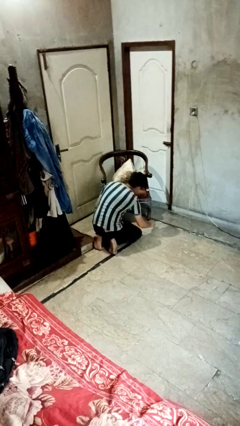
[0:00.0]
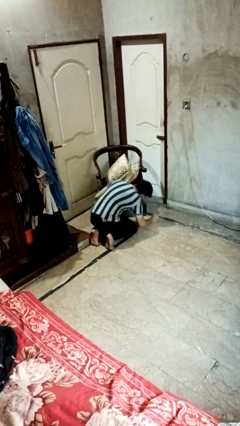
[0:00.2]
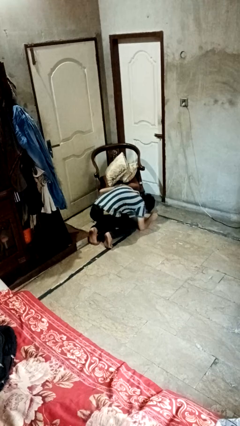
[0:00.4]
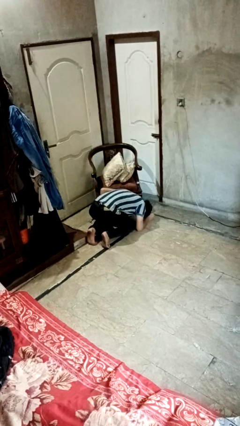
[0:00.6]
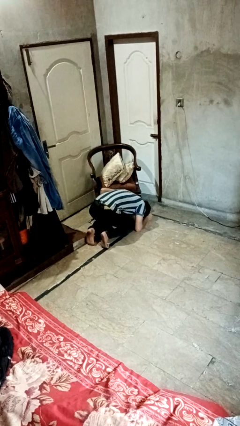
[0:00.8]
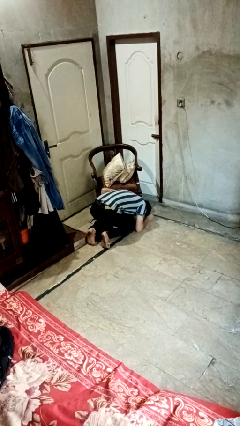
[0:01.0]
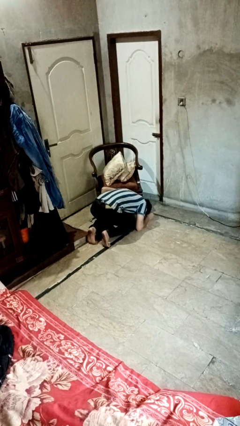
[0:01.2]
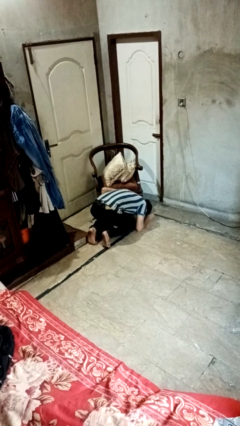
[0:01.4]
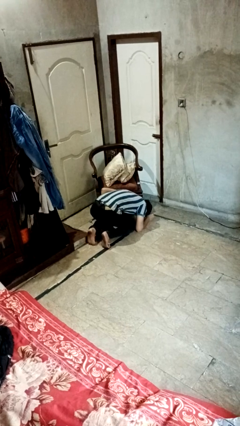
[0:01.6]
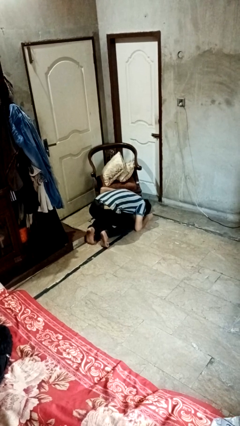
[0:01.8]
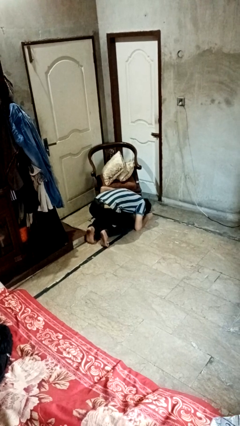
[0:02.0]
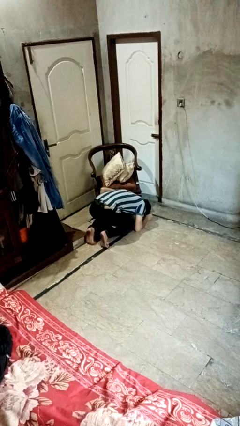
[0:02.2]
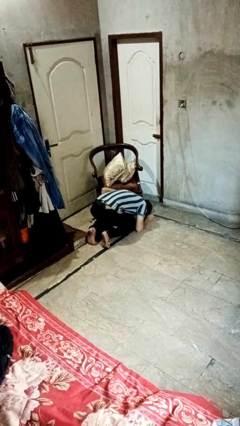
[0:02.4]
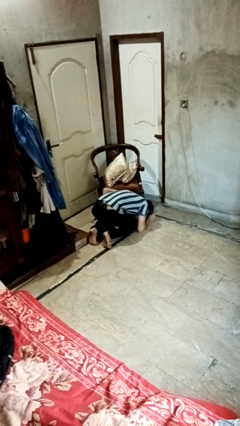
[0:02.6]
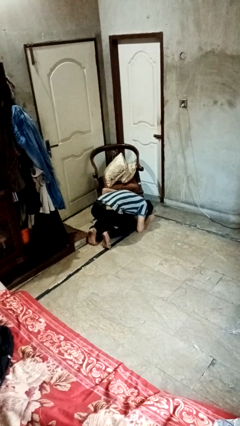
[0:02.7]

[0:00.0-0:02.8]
person searches under couch

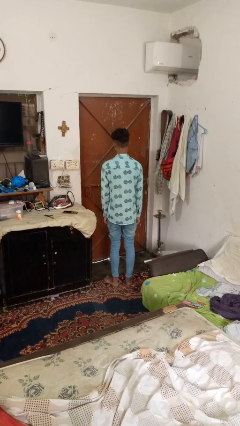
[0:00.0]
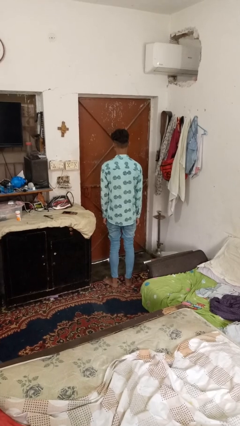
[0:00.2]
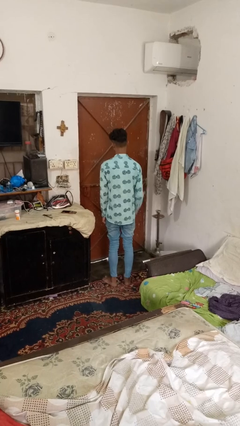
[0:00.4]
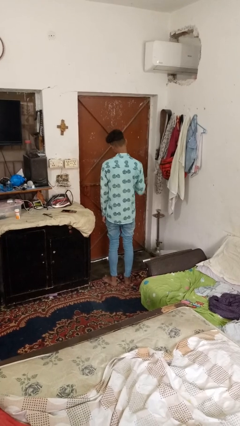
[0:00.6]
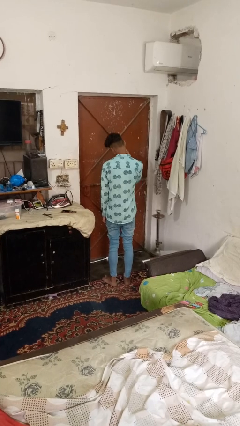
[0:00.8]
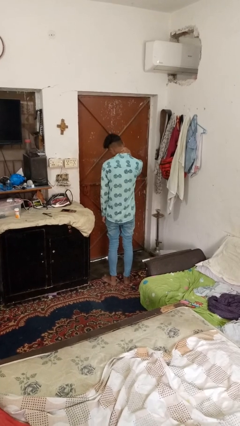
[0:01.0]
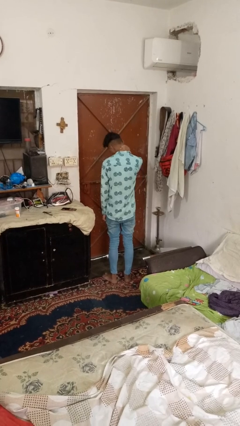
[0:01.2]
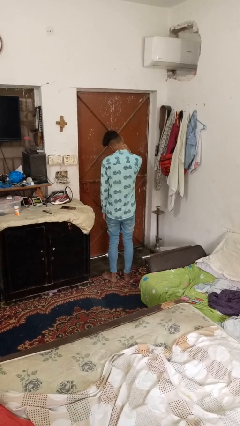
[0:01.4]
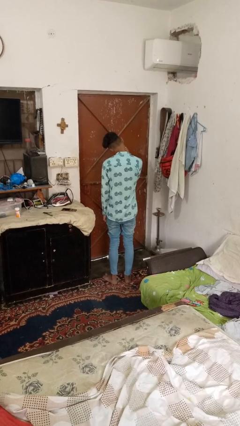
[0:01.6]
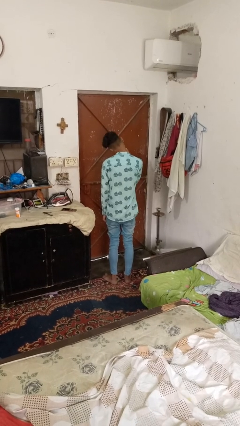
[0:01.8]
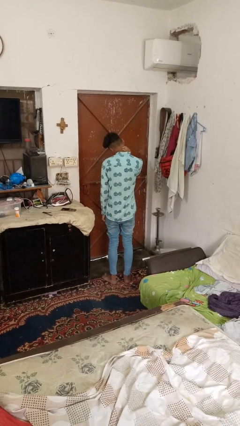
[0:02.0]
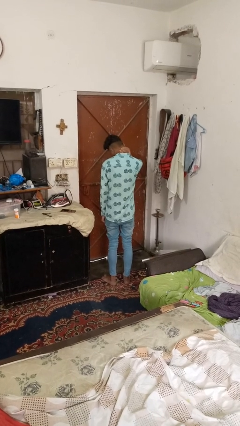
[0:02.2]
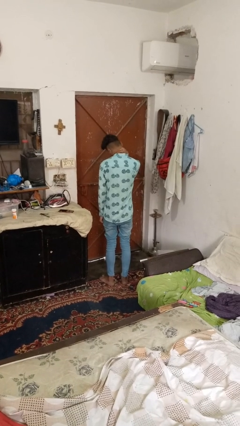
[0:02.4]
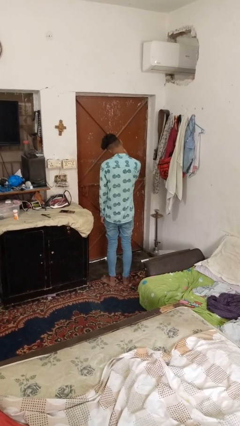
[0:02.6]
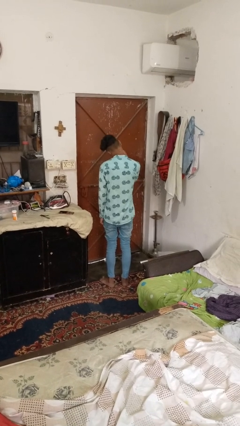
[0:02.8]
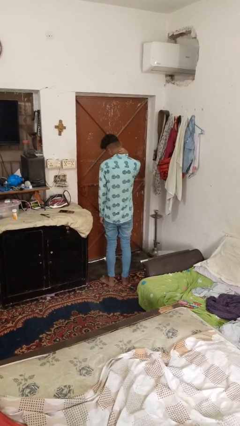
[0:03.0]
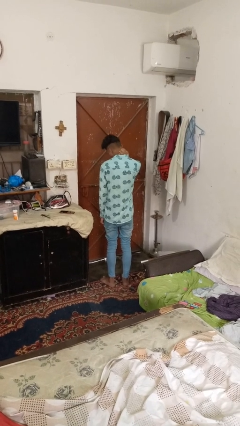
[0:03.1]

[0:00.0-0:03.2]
person rubs neck

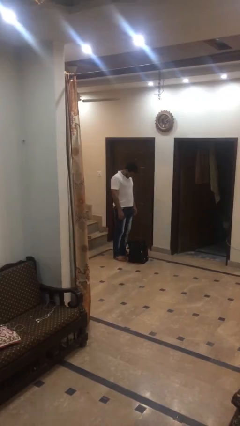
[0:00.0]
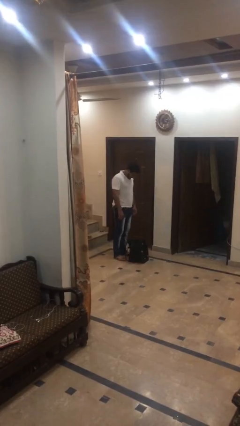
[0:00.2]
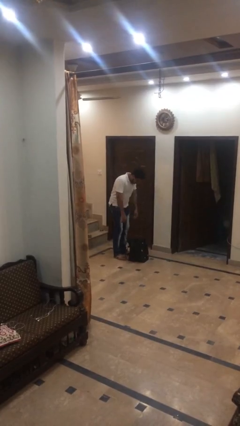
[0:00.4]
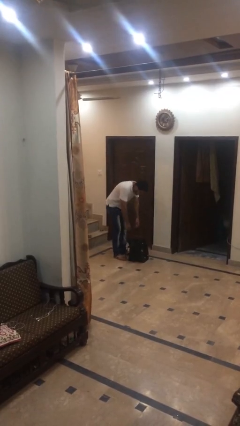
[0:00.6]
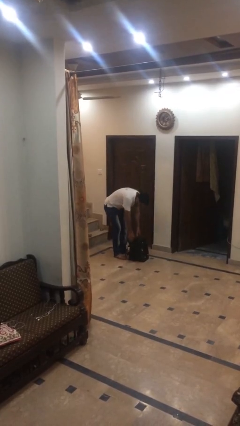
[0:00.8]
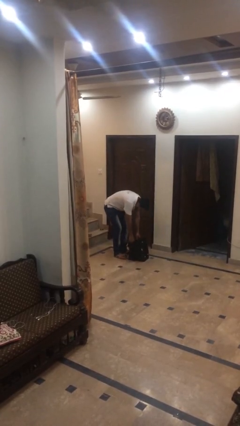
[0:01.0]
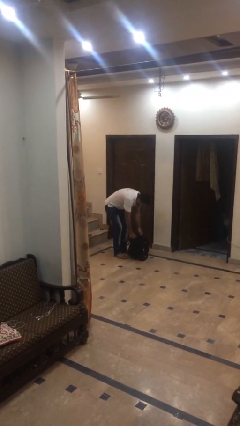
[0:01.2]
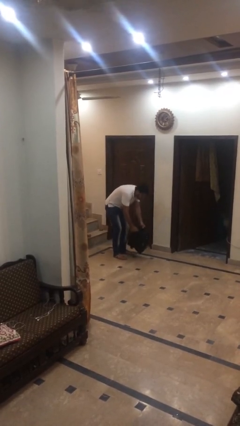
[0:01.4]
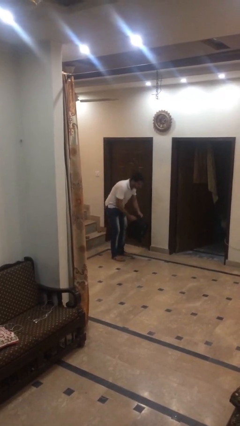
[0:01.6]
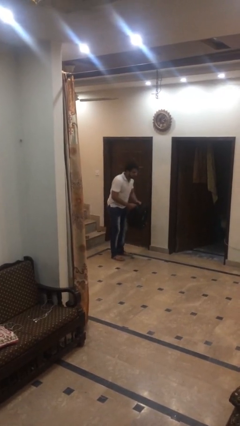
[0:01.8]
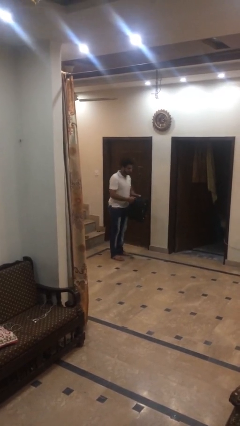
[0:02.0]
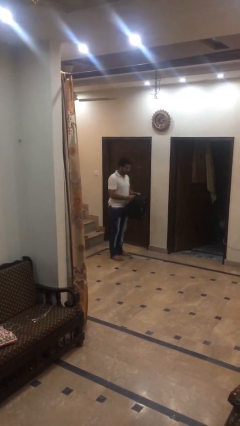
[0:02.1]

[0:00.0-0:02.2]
person picks up object from floor

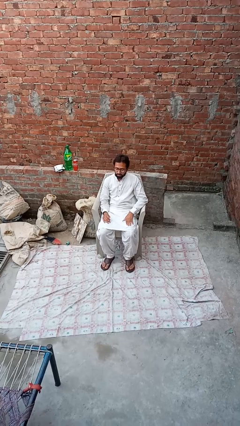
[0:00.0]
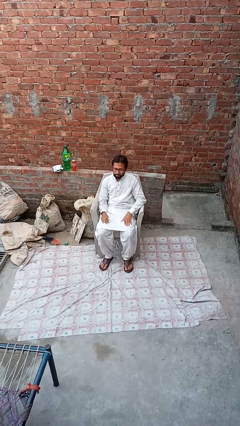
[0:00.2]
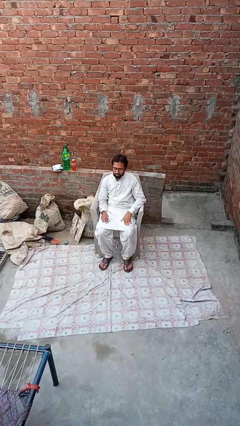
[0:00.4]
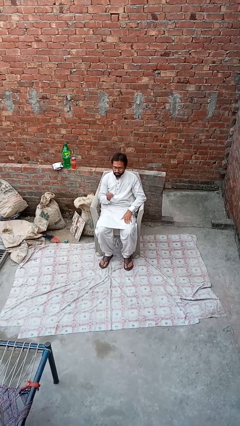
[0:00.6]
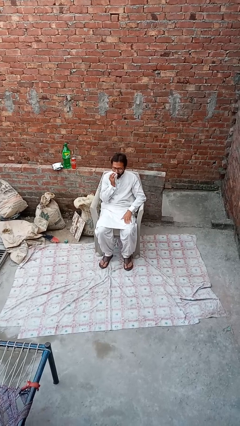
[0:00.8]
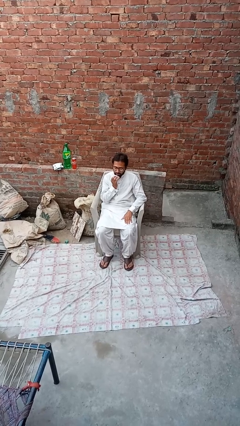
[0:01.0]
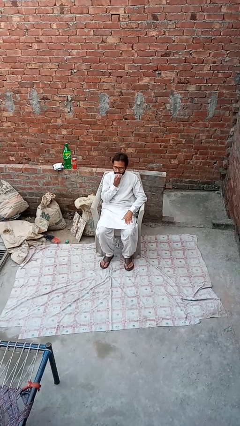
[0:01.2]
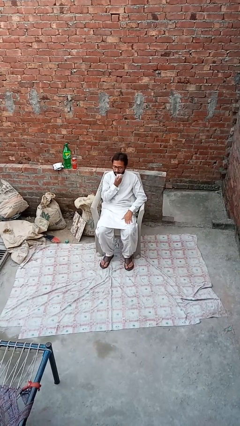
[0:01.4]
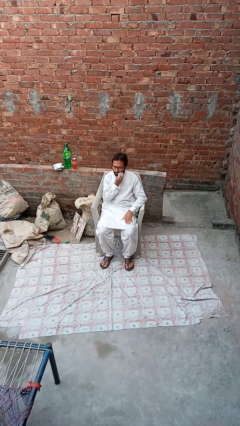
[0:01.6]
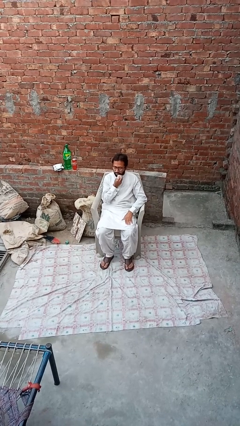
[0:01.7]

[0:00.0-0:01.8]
person wipes mouth with napkin

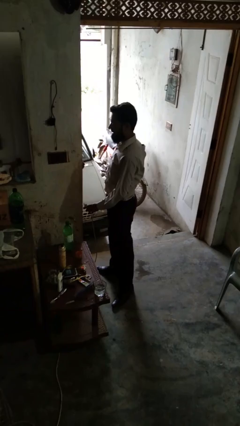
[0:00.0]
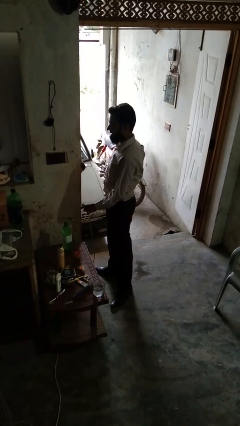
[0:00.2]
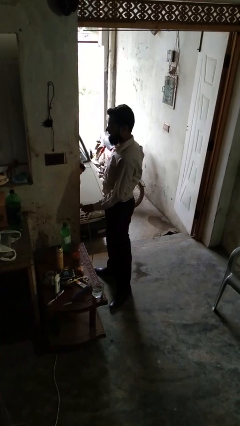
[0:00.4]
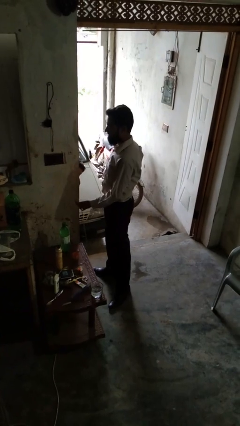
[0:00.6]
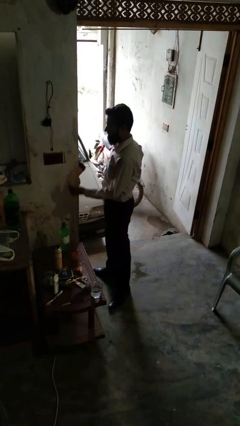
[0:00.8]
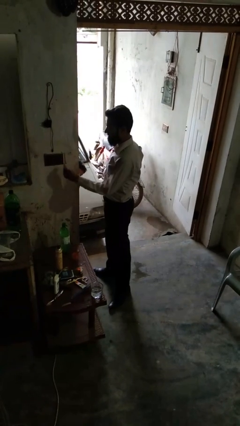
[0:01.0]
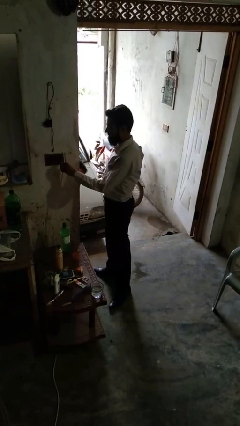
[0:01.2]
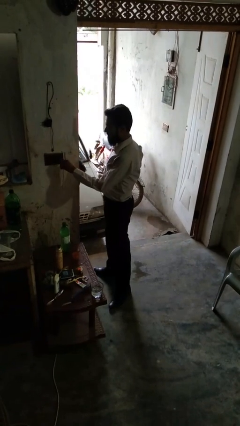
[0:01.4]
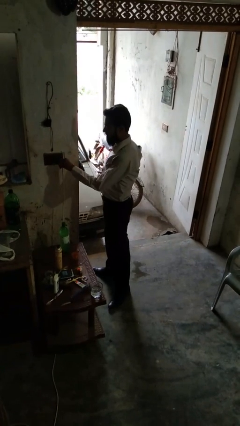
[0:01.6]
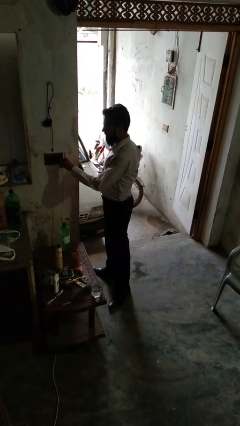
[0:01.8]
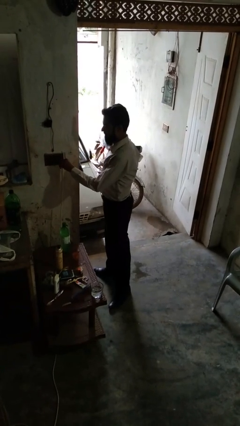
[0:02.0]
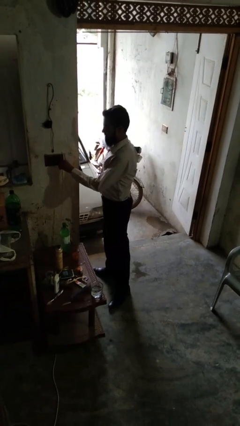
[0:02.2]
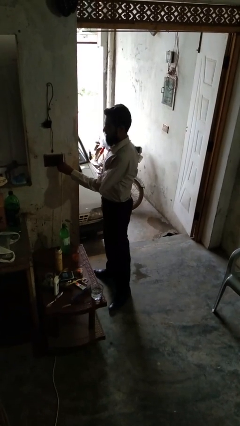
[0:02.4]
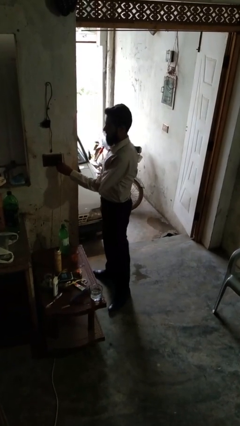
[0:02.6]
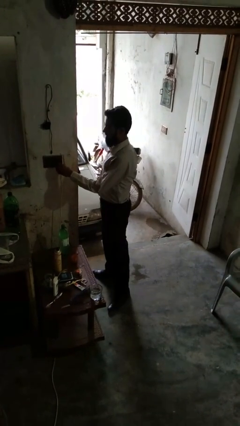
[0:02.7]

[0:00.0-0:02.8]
person plugs into electrical socket

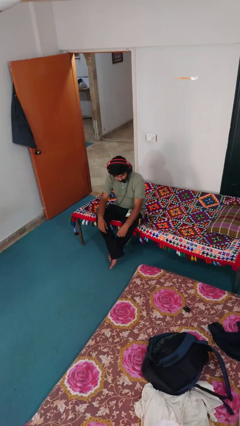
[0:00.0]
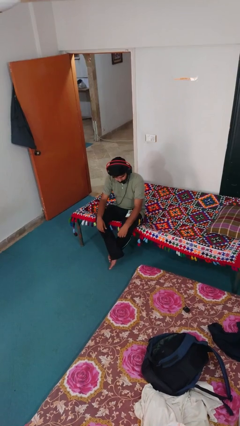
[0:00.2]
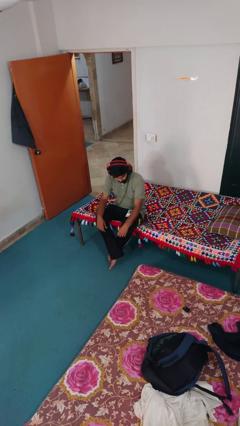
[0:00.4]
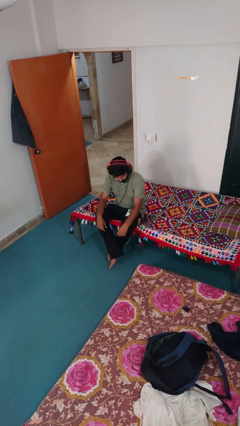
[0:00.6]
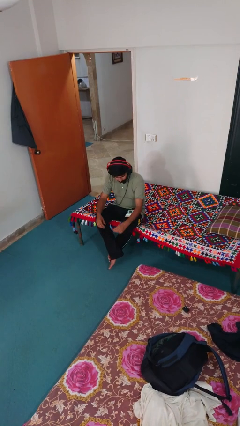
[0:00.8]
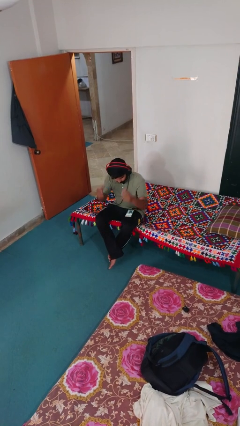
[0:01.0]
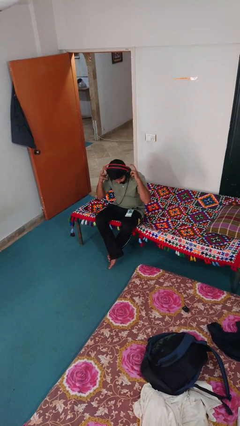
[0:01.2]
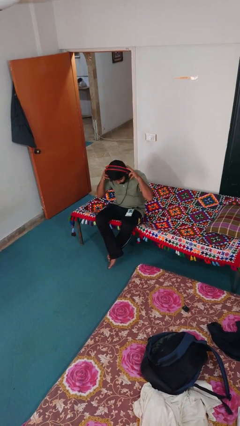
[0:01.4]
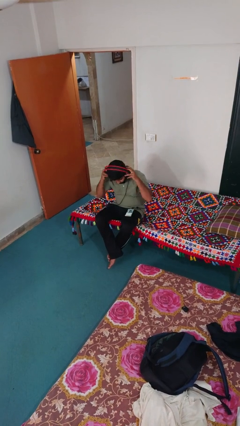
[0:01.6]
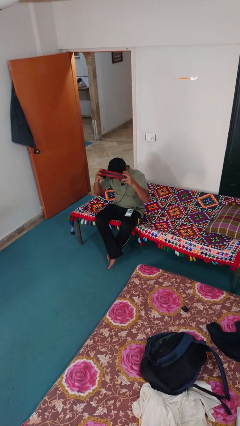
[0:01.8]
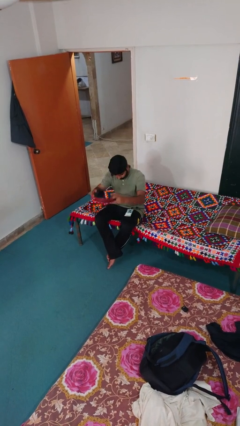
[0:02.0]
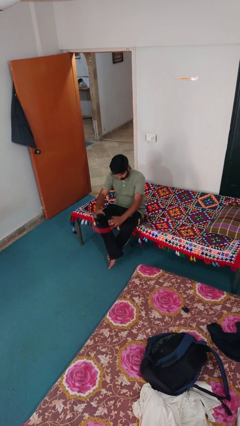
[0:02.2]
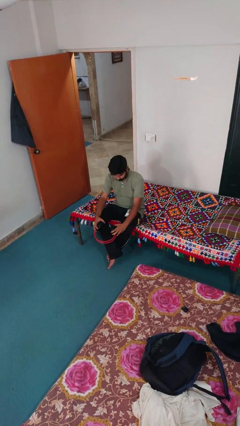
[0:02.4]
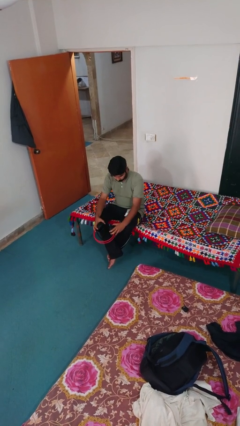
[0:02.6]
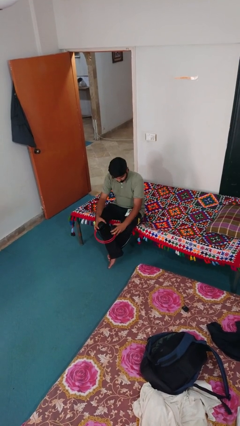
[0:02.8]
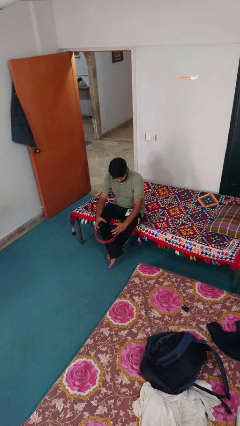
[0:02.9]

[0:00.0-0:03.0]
person takes off headphones

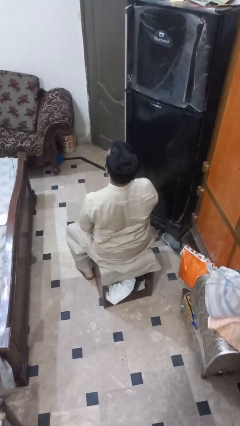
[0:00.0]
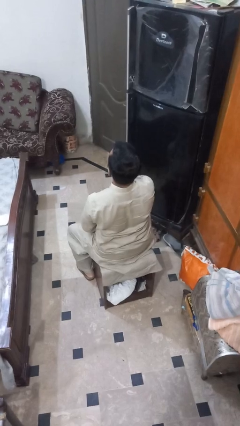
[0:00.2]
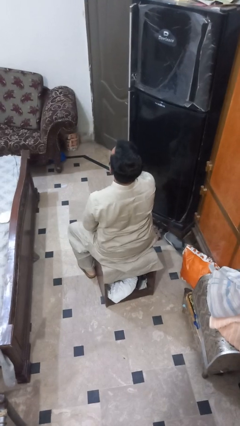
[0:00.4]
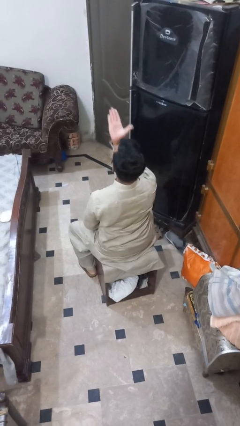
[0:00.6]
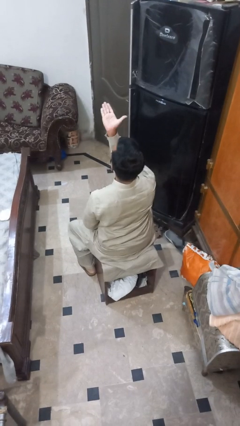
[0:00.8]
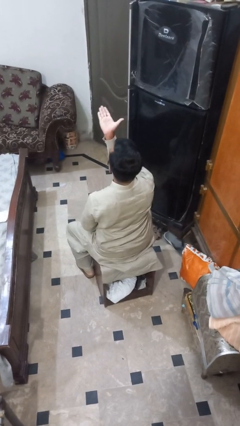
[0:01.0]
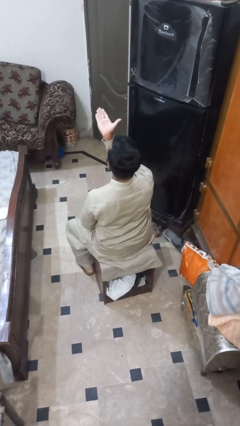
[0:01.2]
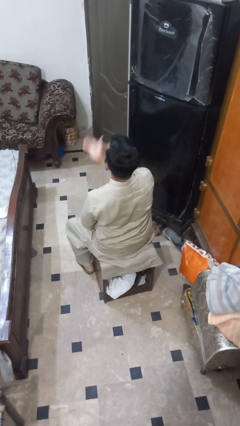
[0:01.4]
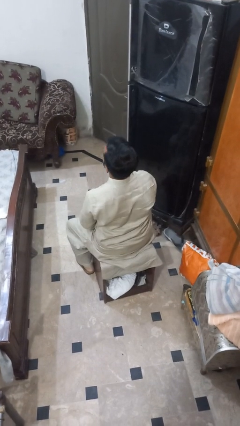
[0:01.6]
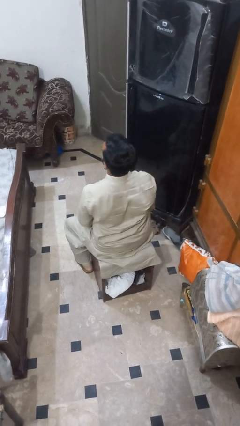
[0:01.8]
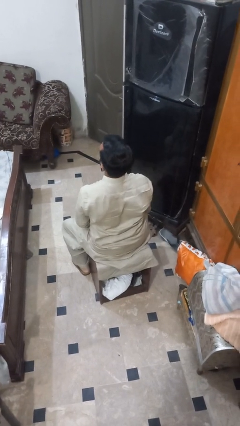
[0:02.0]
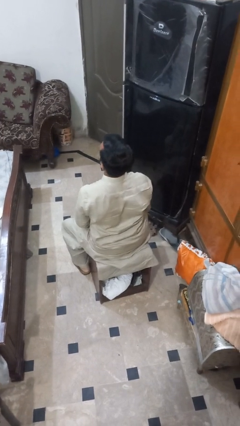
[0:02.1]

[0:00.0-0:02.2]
person gestures blow kiss
